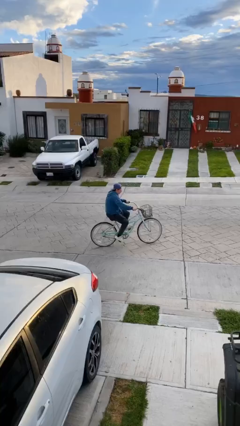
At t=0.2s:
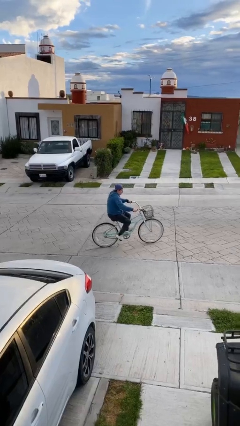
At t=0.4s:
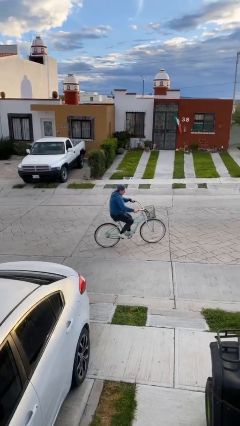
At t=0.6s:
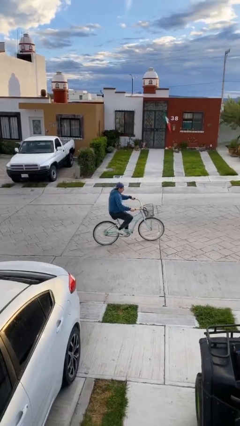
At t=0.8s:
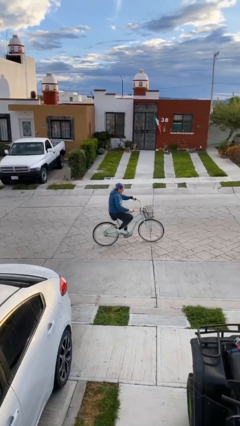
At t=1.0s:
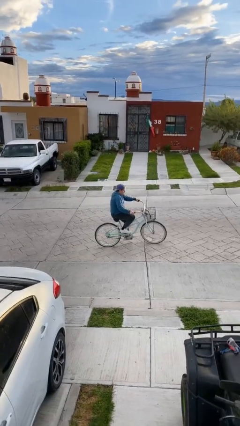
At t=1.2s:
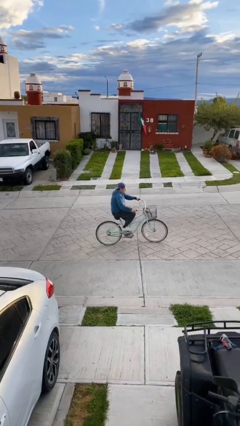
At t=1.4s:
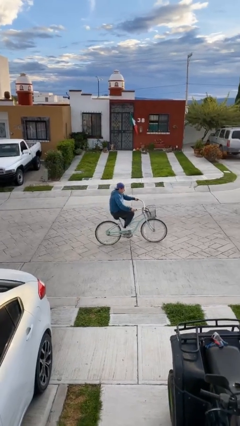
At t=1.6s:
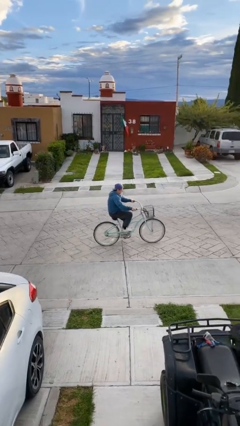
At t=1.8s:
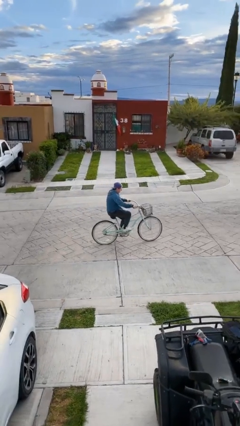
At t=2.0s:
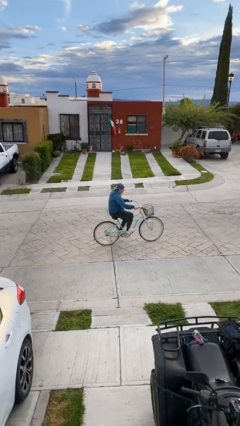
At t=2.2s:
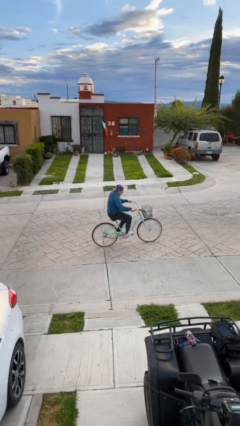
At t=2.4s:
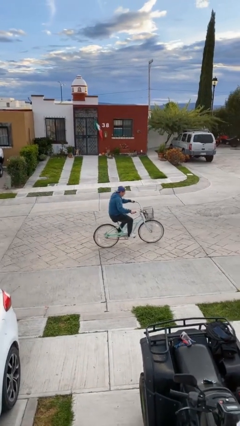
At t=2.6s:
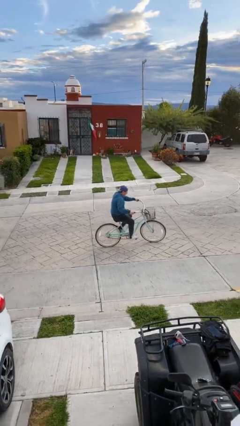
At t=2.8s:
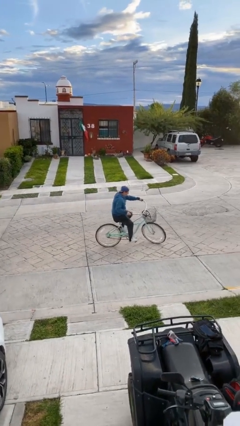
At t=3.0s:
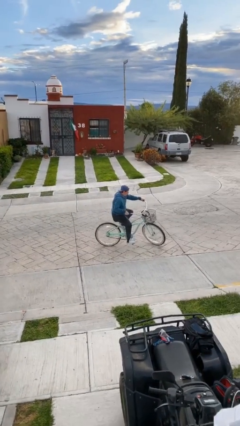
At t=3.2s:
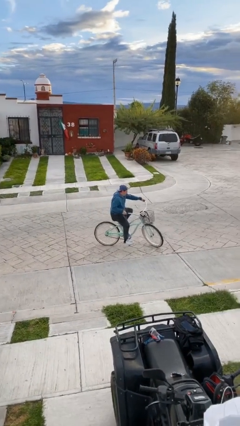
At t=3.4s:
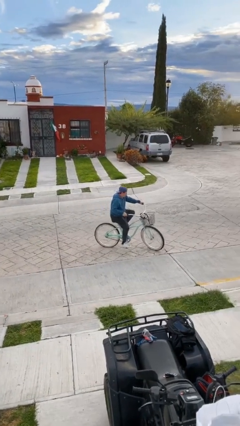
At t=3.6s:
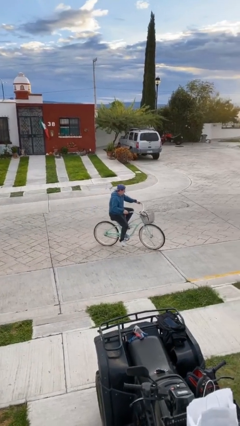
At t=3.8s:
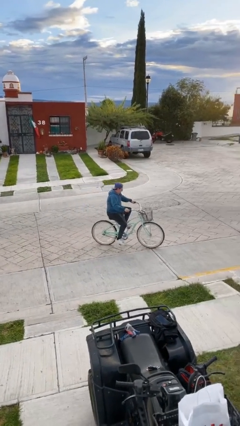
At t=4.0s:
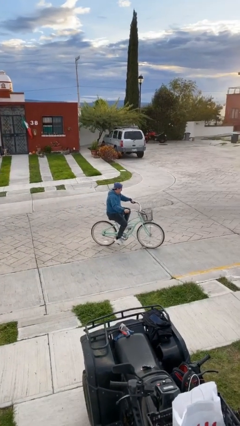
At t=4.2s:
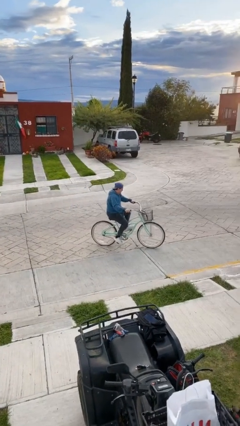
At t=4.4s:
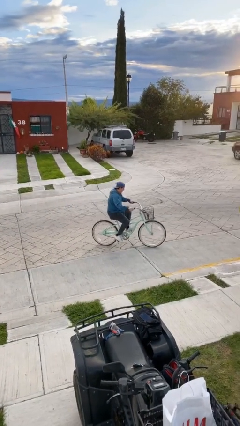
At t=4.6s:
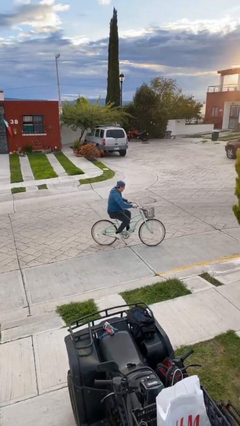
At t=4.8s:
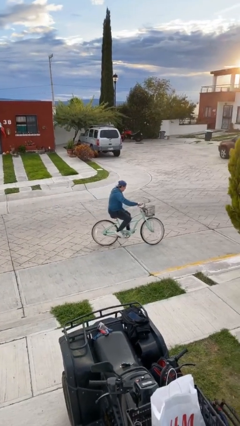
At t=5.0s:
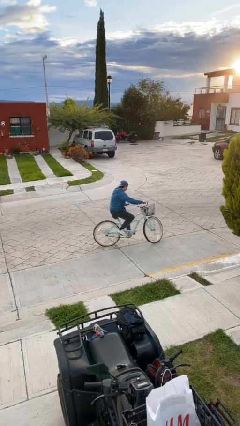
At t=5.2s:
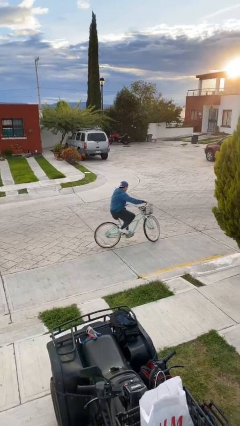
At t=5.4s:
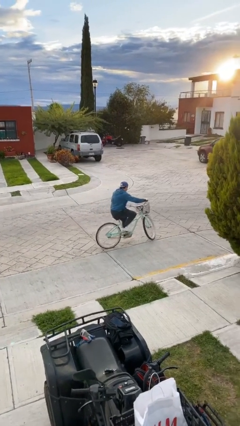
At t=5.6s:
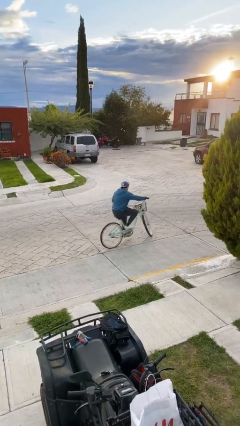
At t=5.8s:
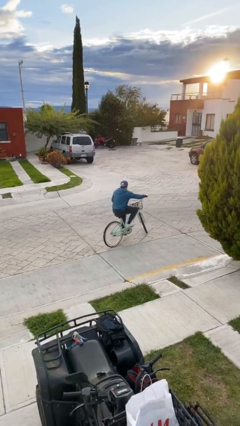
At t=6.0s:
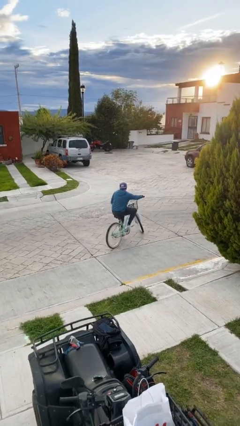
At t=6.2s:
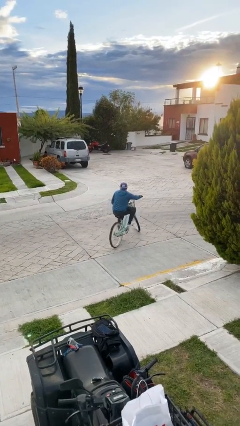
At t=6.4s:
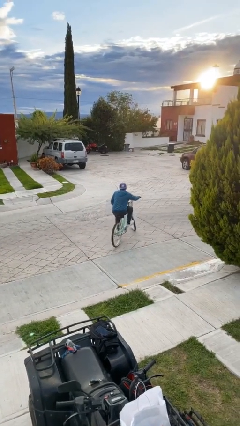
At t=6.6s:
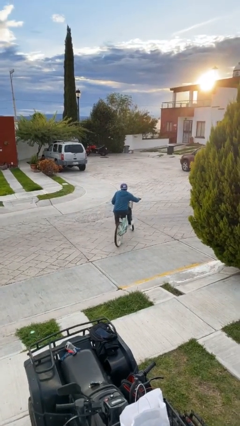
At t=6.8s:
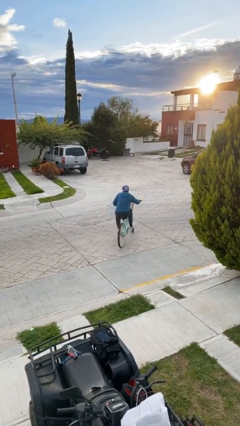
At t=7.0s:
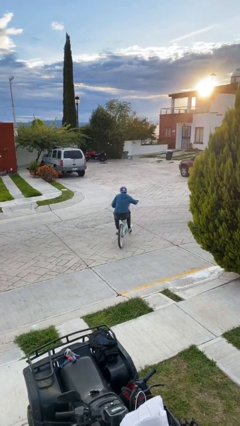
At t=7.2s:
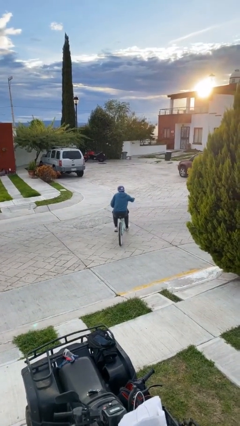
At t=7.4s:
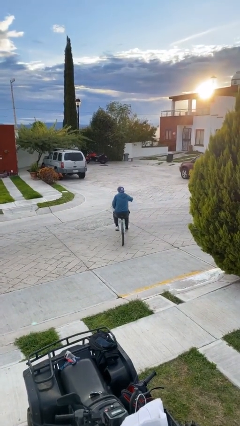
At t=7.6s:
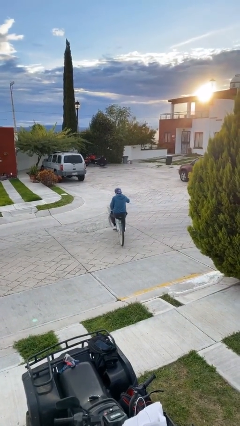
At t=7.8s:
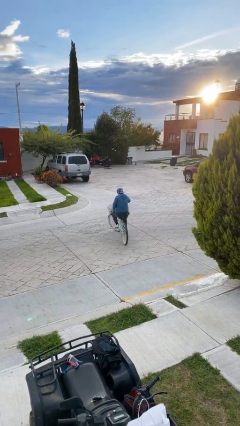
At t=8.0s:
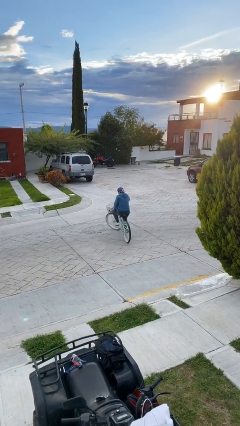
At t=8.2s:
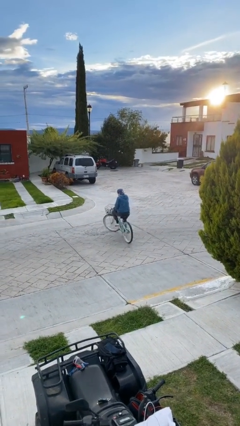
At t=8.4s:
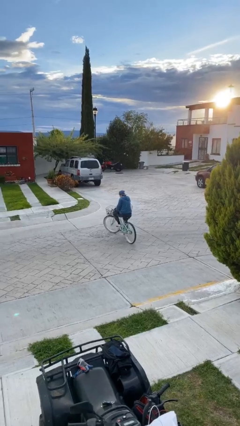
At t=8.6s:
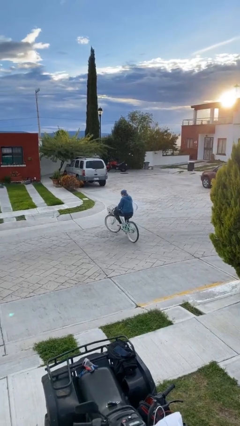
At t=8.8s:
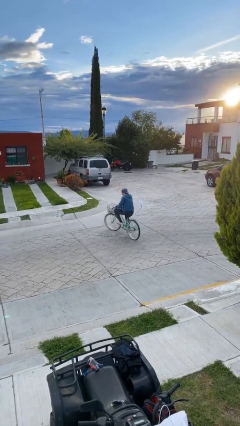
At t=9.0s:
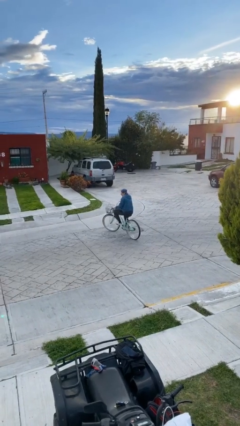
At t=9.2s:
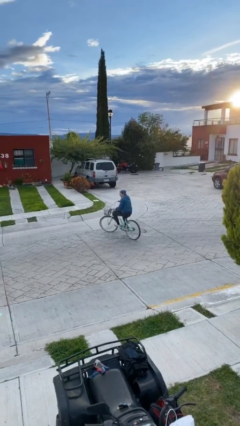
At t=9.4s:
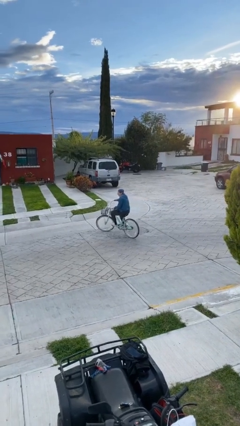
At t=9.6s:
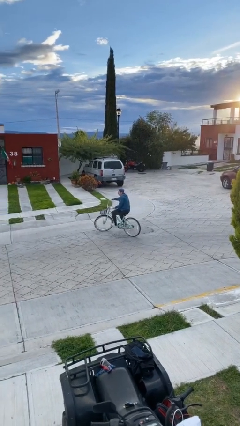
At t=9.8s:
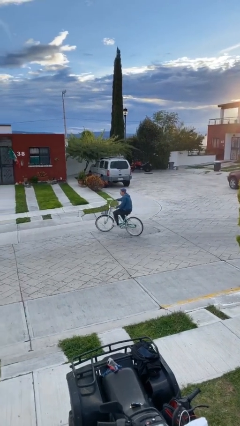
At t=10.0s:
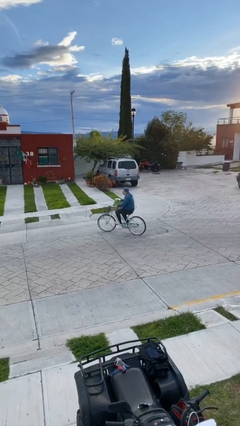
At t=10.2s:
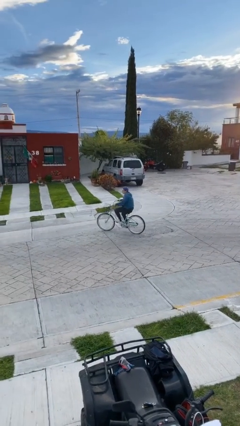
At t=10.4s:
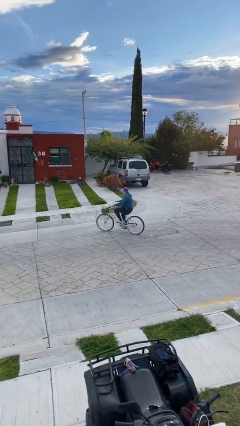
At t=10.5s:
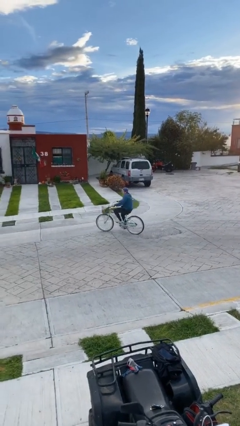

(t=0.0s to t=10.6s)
person rides bicycle

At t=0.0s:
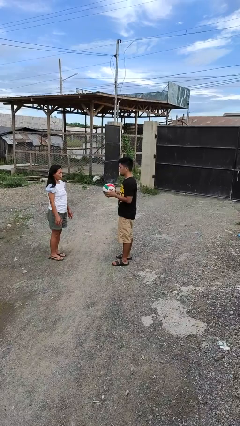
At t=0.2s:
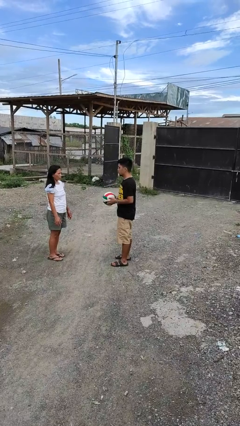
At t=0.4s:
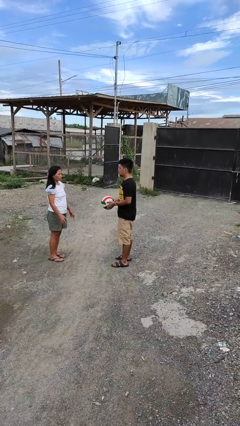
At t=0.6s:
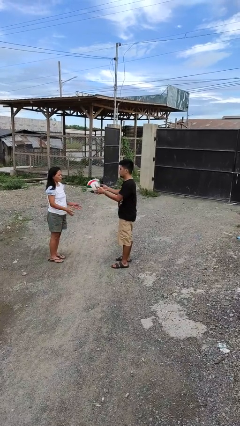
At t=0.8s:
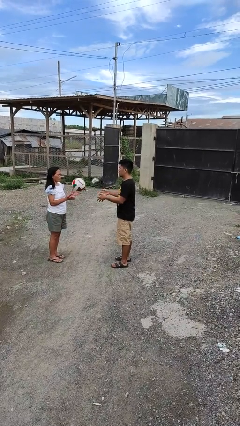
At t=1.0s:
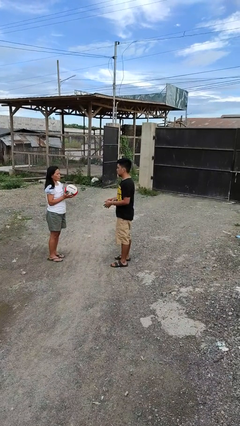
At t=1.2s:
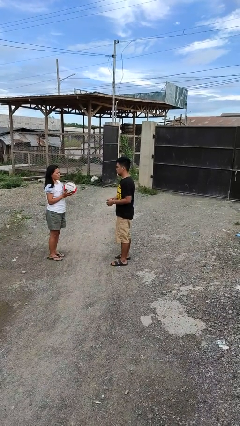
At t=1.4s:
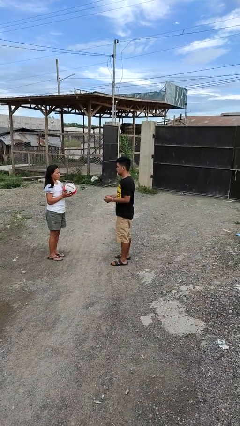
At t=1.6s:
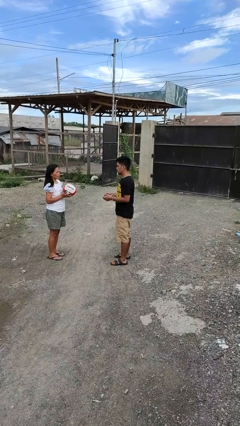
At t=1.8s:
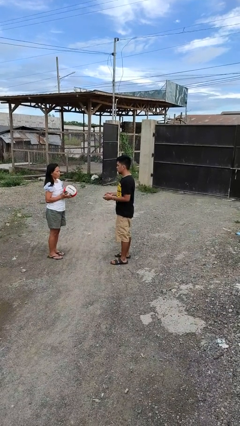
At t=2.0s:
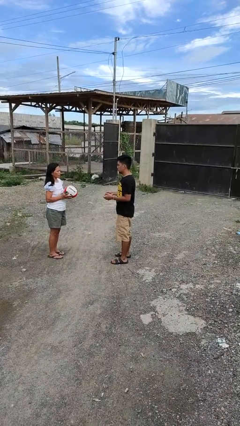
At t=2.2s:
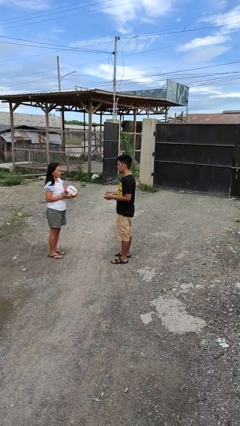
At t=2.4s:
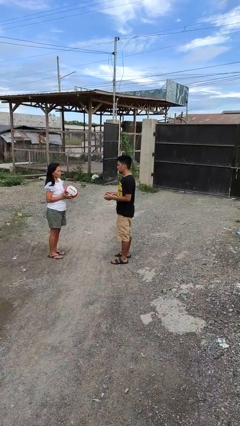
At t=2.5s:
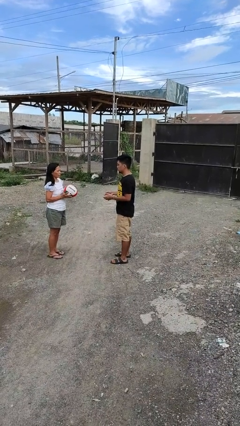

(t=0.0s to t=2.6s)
person throws object to person

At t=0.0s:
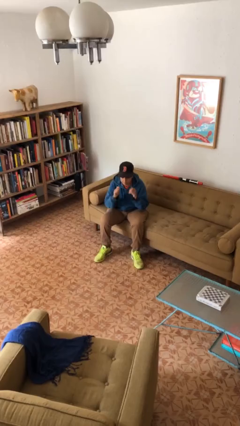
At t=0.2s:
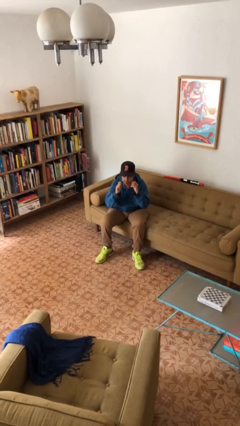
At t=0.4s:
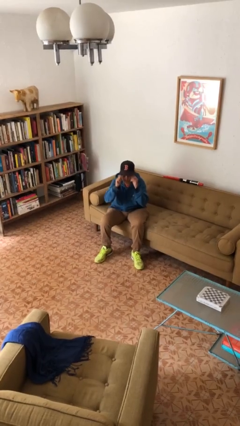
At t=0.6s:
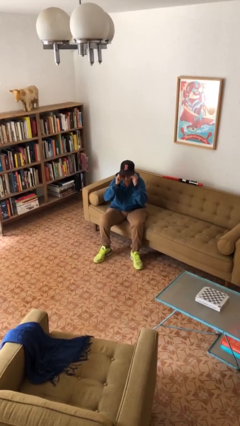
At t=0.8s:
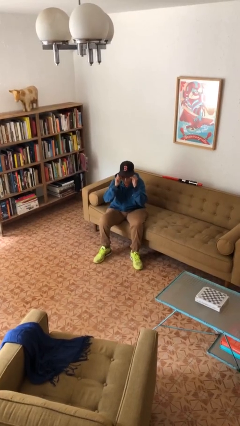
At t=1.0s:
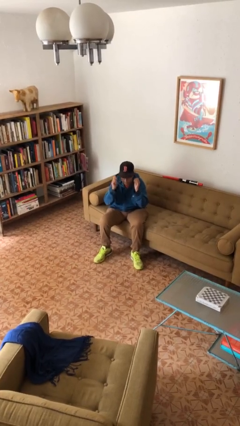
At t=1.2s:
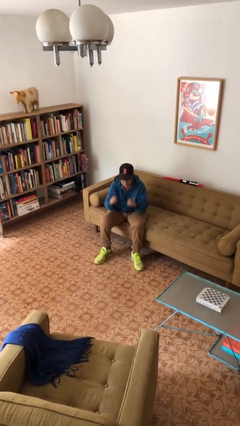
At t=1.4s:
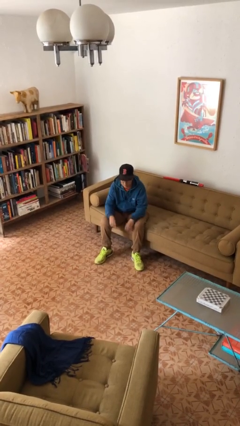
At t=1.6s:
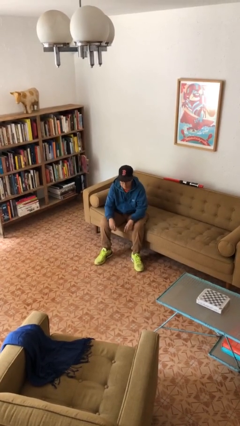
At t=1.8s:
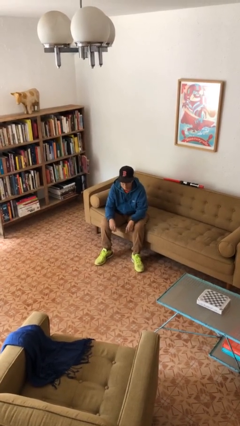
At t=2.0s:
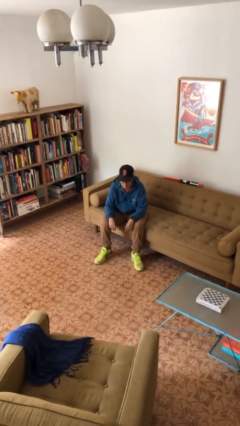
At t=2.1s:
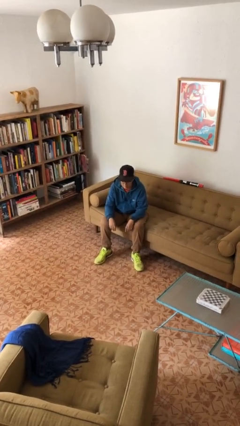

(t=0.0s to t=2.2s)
person puts on glasses

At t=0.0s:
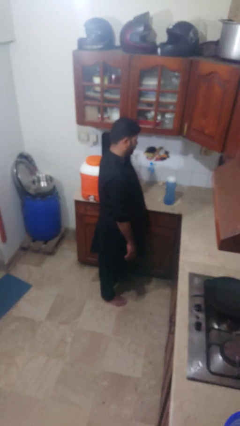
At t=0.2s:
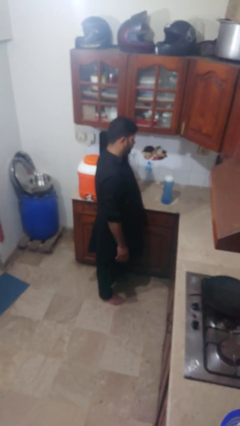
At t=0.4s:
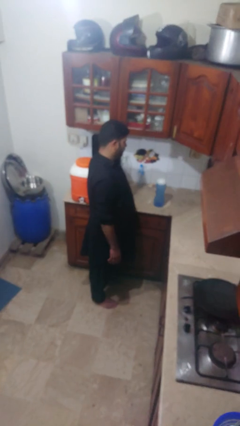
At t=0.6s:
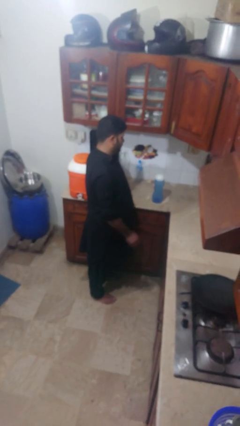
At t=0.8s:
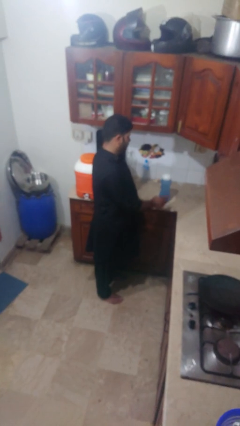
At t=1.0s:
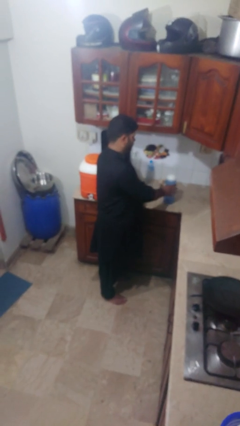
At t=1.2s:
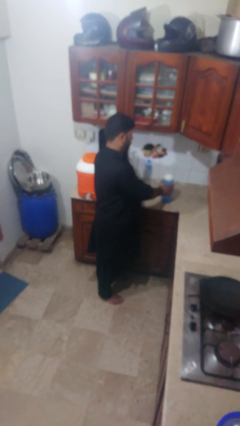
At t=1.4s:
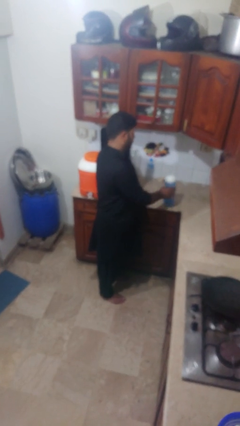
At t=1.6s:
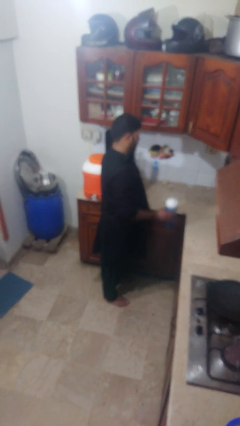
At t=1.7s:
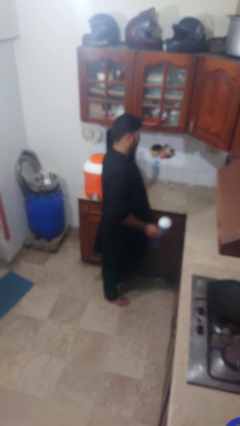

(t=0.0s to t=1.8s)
person picks up object from countertop

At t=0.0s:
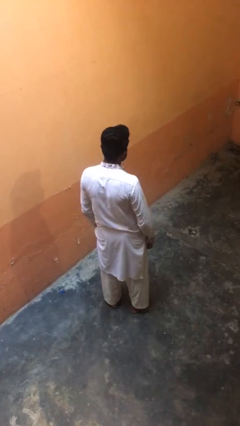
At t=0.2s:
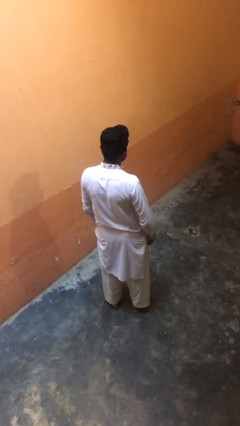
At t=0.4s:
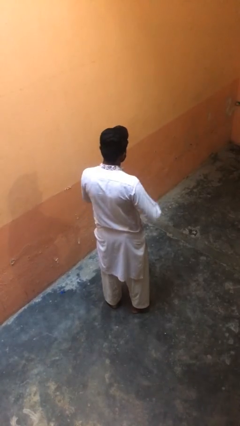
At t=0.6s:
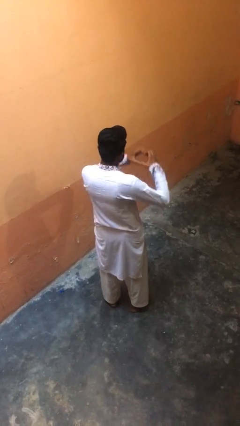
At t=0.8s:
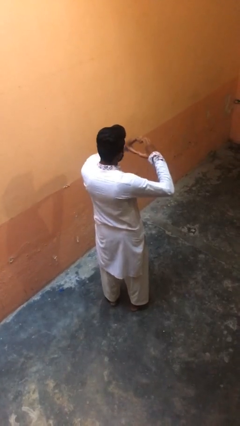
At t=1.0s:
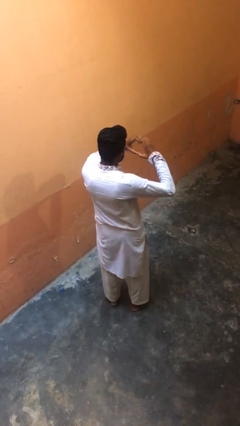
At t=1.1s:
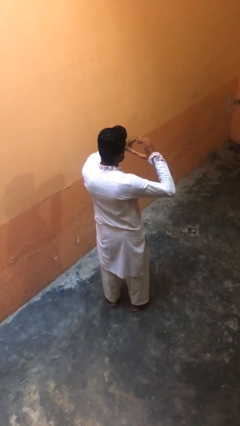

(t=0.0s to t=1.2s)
person gestures heart
